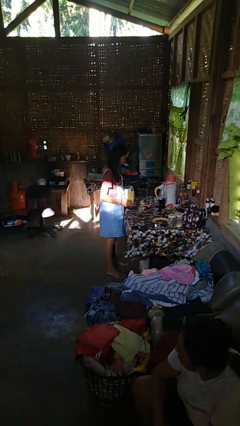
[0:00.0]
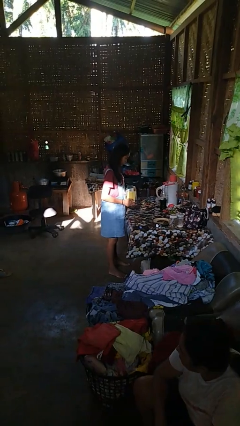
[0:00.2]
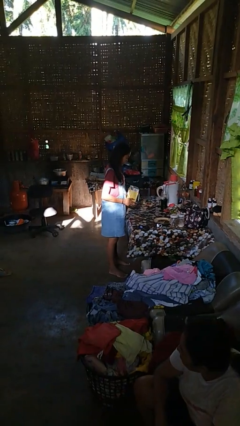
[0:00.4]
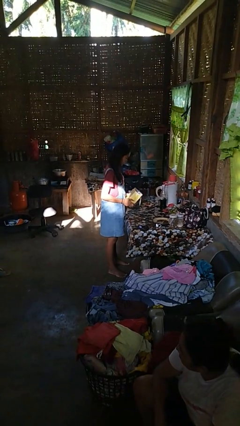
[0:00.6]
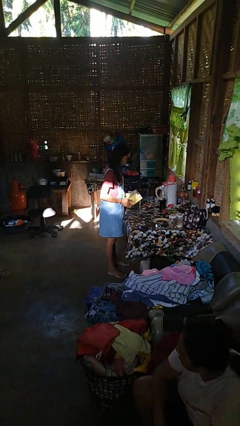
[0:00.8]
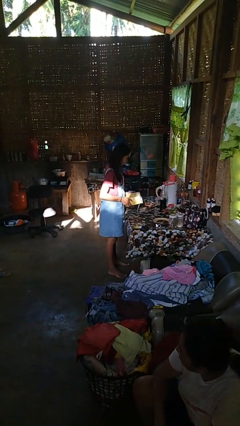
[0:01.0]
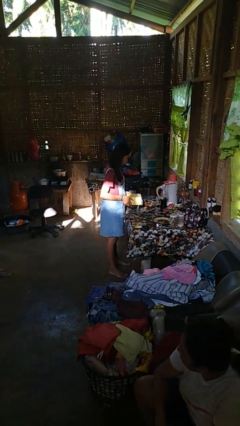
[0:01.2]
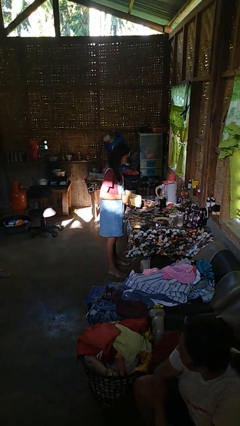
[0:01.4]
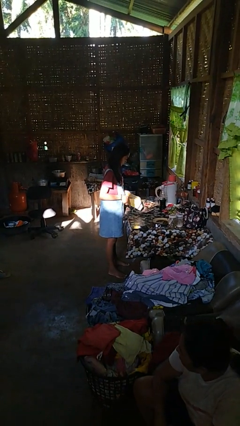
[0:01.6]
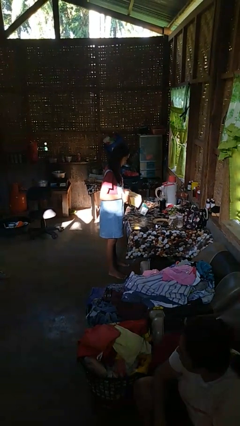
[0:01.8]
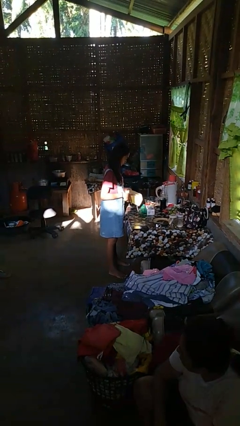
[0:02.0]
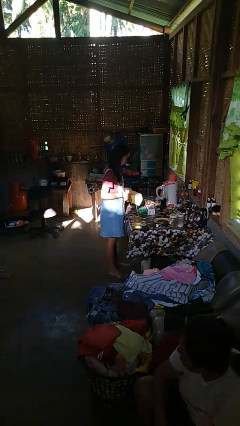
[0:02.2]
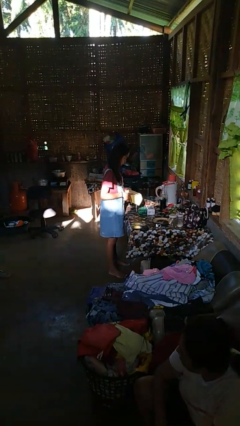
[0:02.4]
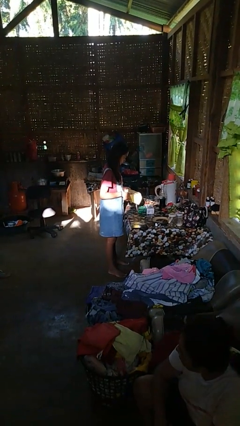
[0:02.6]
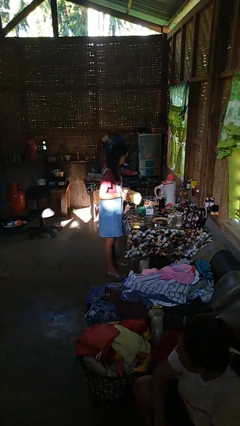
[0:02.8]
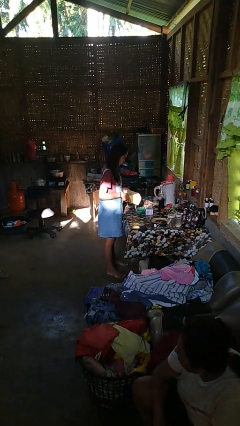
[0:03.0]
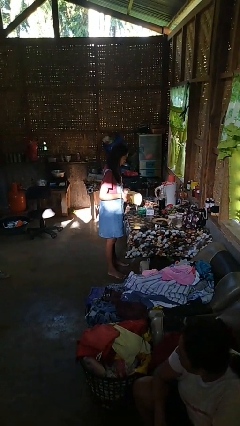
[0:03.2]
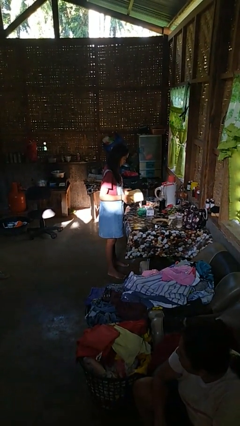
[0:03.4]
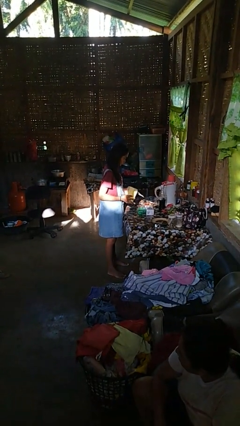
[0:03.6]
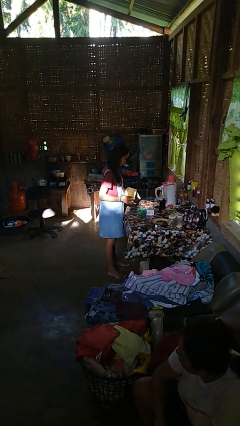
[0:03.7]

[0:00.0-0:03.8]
person unloads box onto table

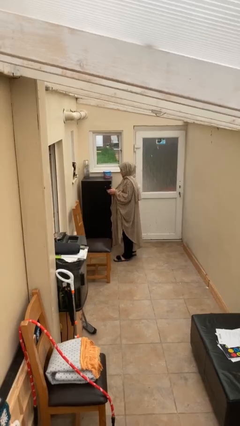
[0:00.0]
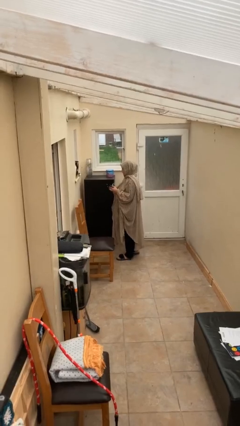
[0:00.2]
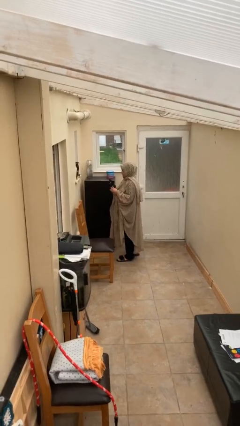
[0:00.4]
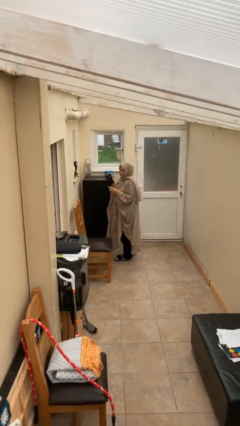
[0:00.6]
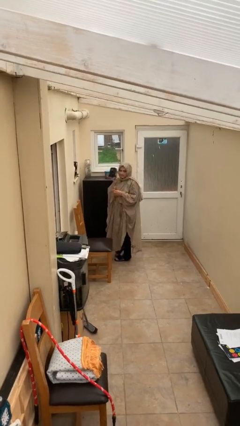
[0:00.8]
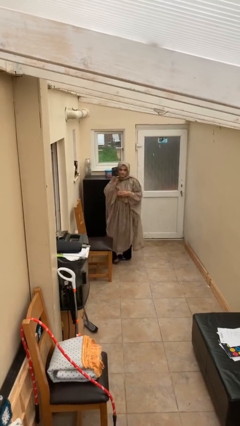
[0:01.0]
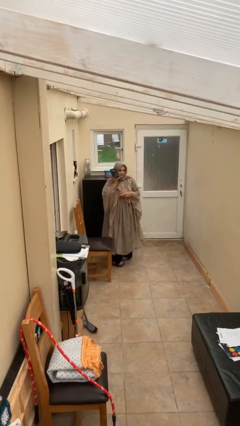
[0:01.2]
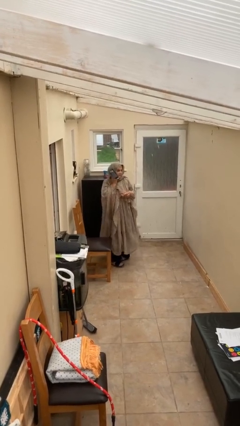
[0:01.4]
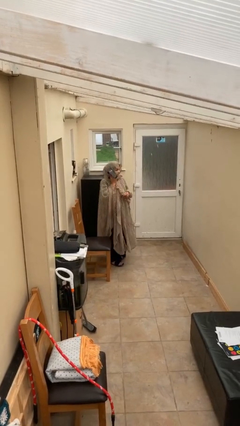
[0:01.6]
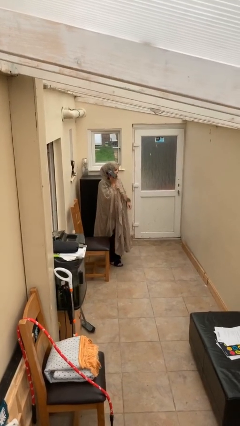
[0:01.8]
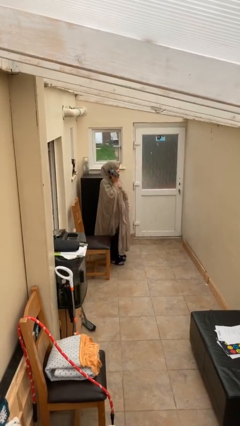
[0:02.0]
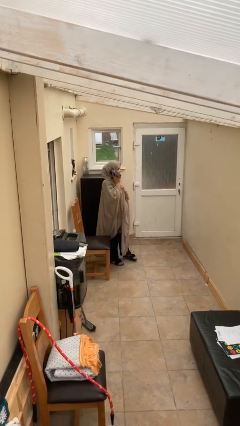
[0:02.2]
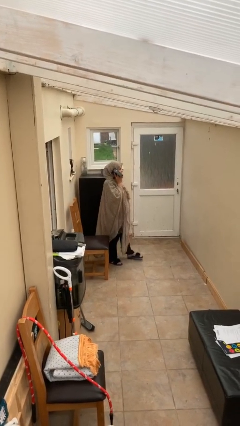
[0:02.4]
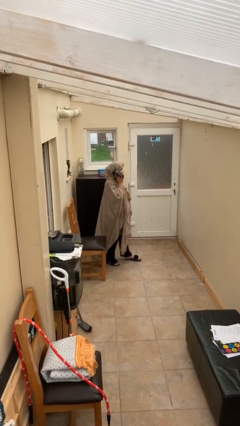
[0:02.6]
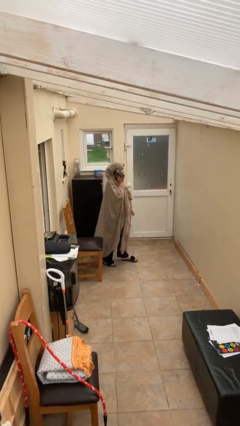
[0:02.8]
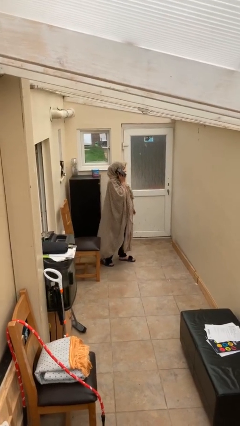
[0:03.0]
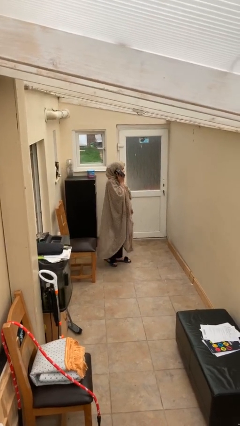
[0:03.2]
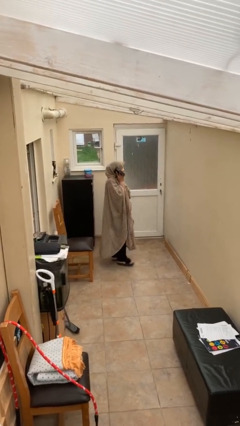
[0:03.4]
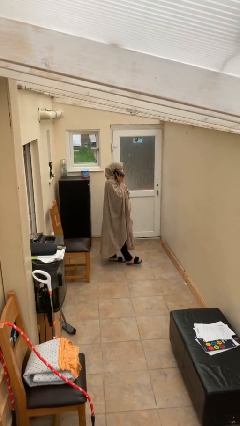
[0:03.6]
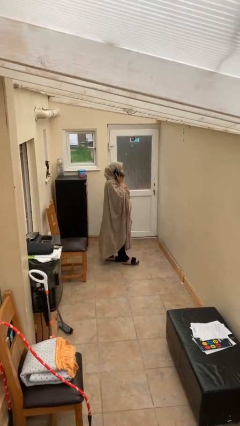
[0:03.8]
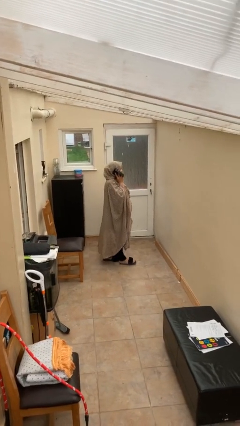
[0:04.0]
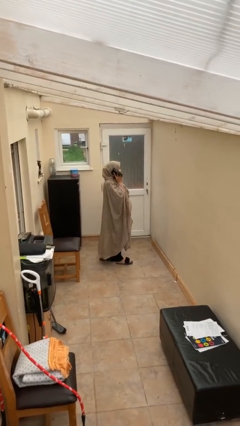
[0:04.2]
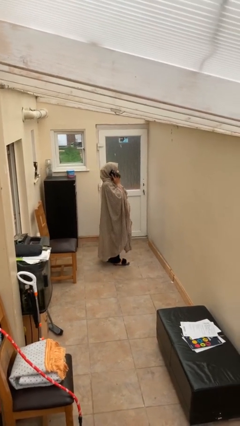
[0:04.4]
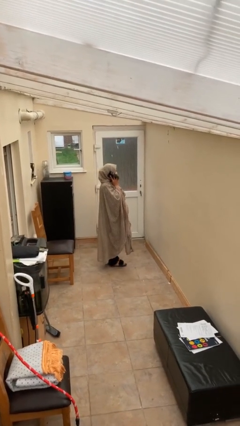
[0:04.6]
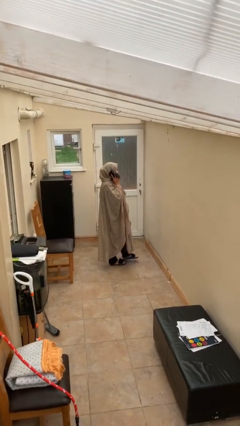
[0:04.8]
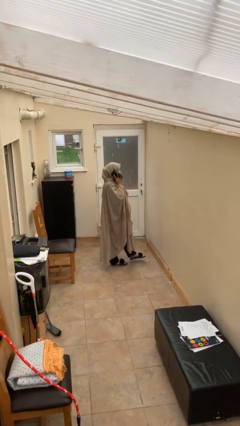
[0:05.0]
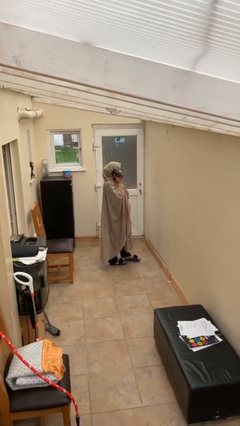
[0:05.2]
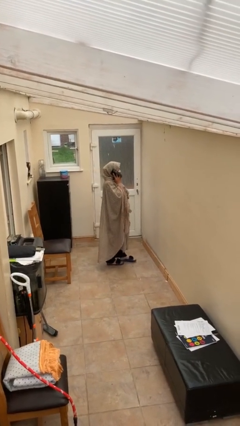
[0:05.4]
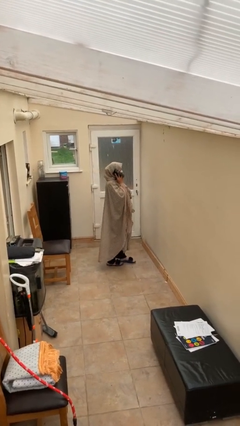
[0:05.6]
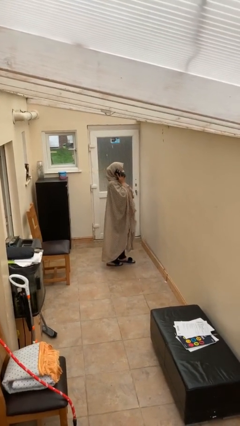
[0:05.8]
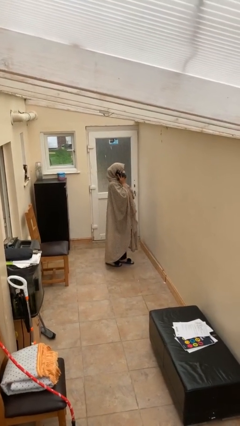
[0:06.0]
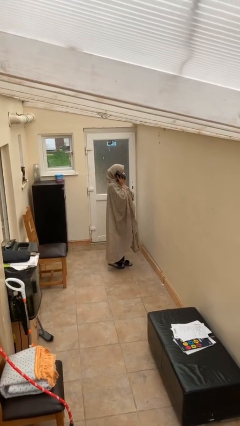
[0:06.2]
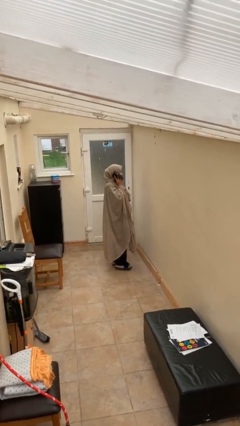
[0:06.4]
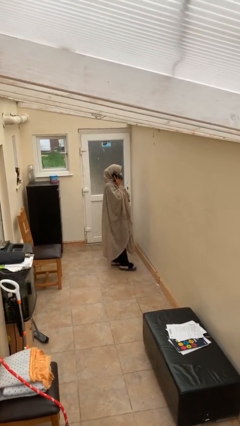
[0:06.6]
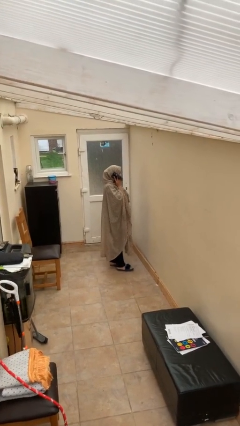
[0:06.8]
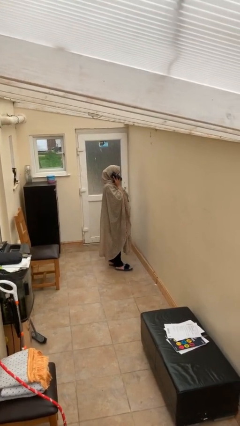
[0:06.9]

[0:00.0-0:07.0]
person talks on phone

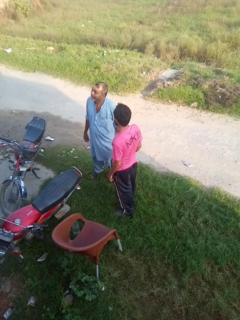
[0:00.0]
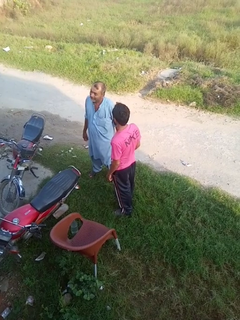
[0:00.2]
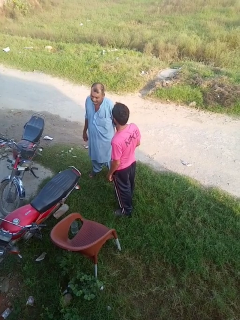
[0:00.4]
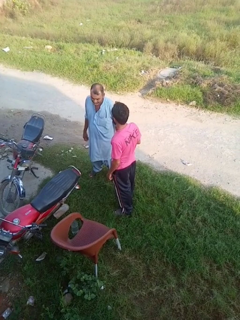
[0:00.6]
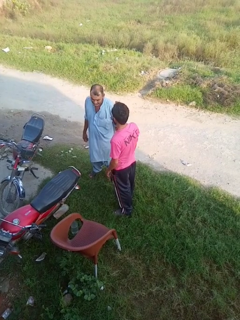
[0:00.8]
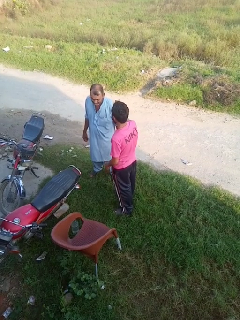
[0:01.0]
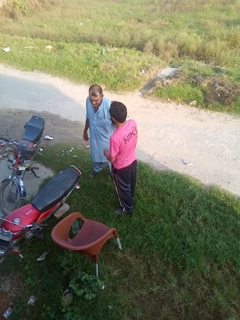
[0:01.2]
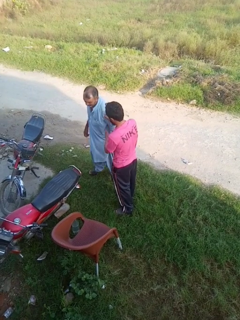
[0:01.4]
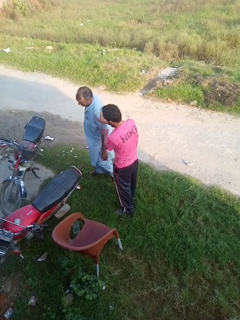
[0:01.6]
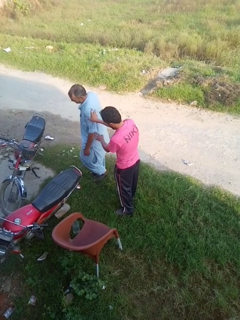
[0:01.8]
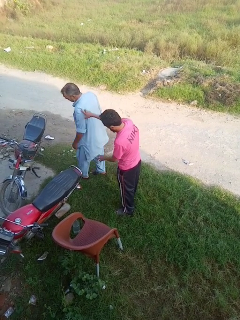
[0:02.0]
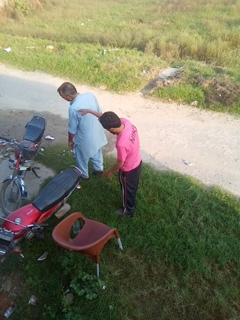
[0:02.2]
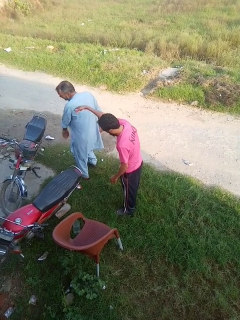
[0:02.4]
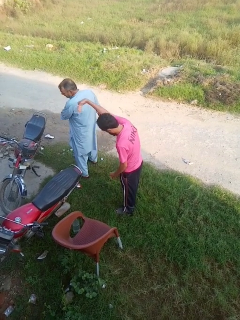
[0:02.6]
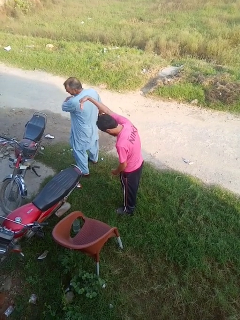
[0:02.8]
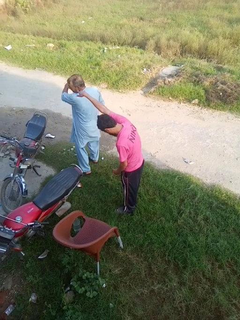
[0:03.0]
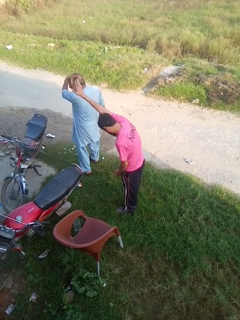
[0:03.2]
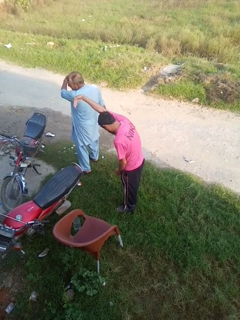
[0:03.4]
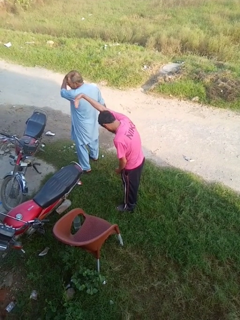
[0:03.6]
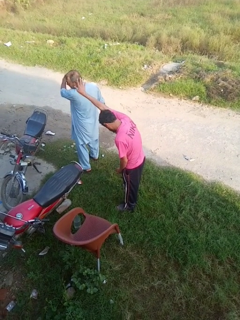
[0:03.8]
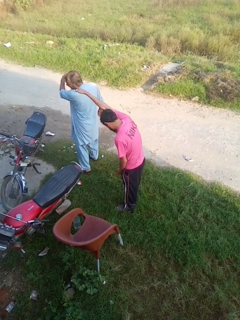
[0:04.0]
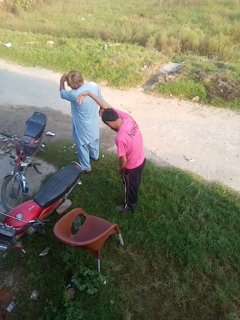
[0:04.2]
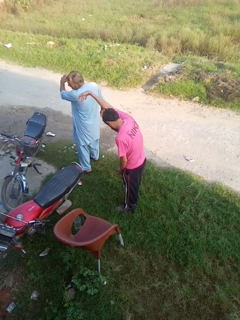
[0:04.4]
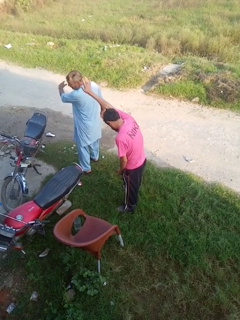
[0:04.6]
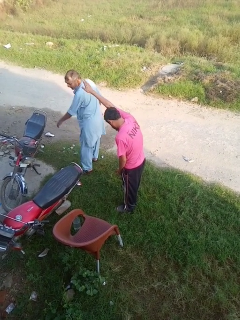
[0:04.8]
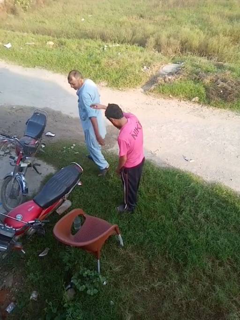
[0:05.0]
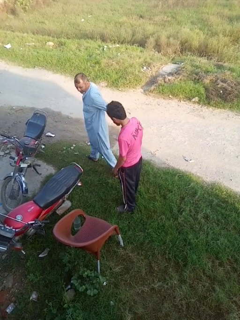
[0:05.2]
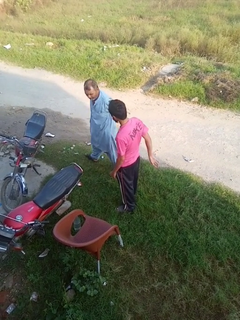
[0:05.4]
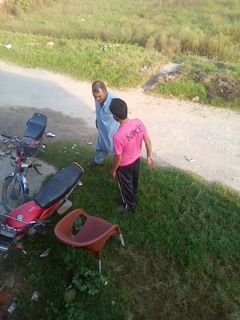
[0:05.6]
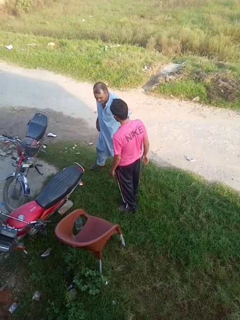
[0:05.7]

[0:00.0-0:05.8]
person shoves person

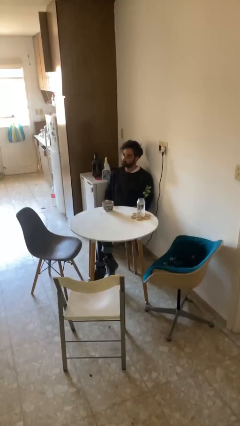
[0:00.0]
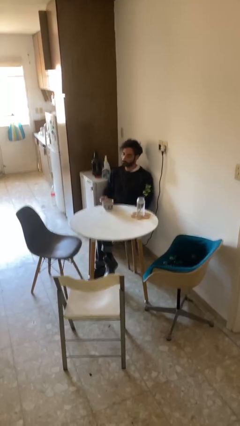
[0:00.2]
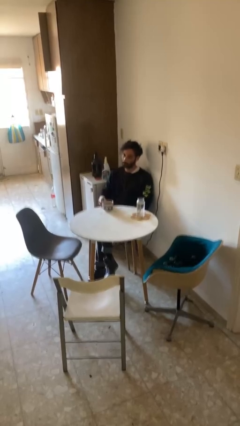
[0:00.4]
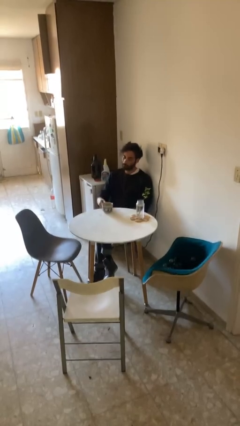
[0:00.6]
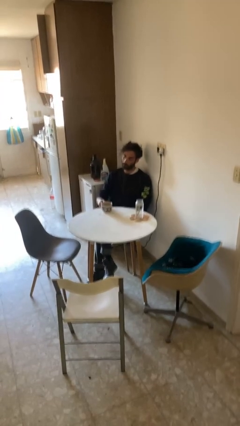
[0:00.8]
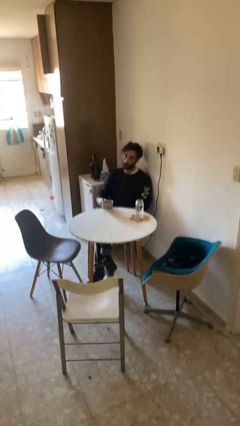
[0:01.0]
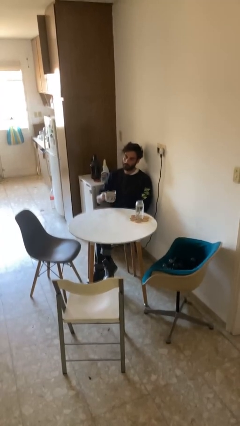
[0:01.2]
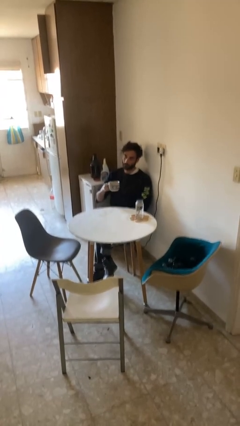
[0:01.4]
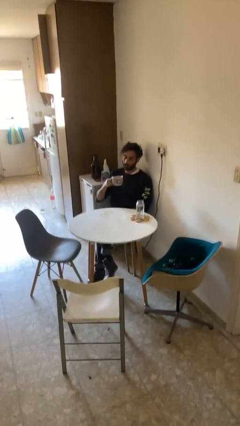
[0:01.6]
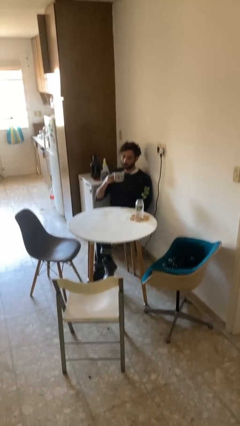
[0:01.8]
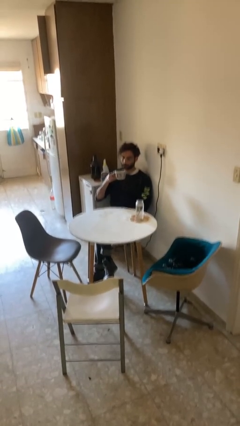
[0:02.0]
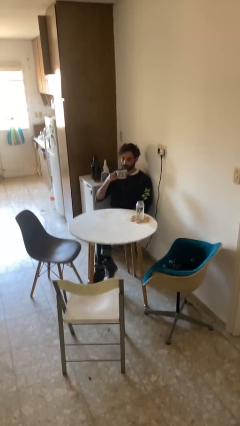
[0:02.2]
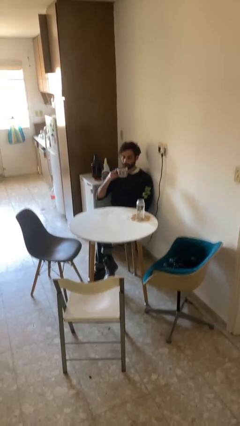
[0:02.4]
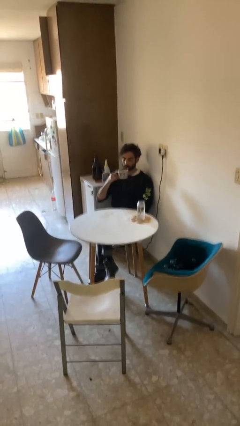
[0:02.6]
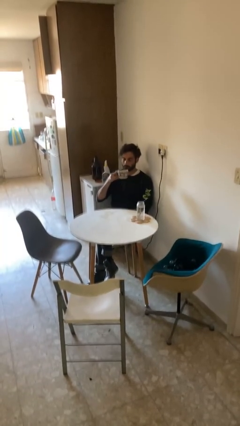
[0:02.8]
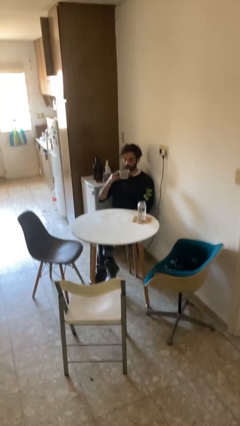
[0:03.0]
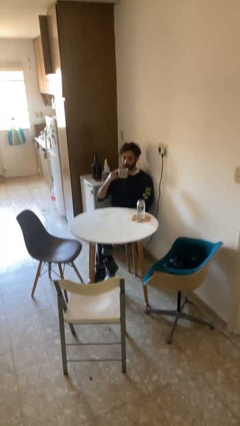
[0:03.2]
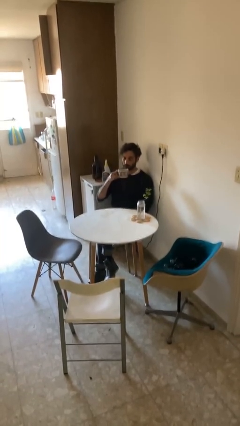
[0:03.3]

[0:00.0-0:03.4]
person picks up object from table
